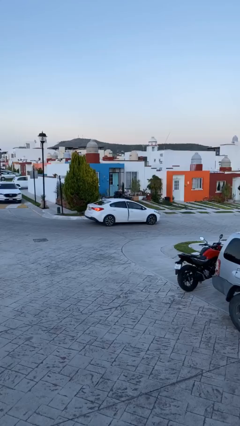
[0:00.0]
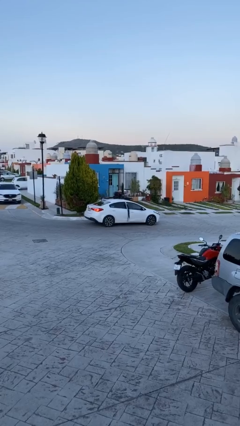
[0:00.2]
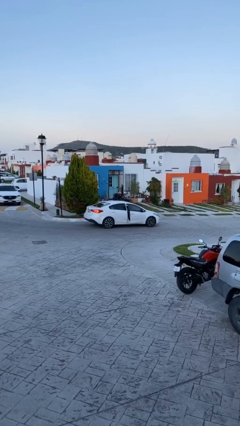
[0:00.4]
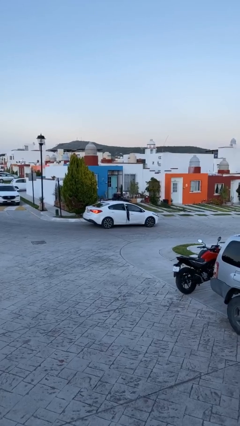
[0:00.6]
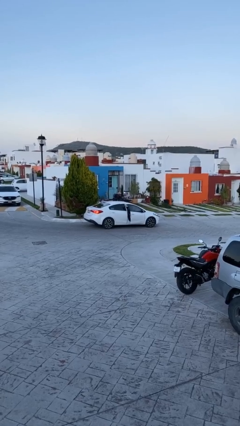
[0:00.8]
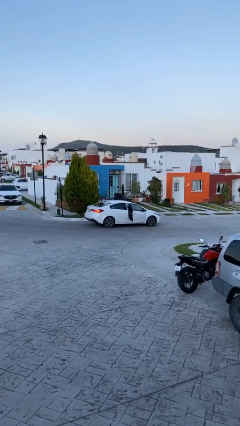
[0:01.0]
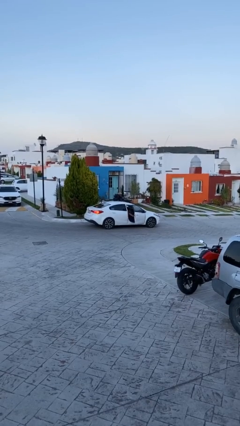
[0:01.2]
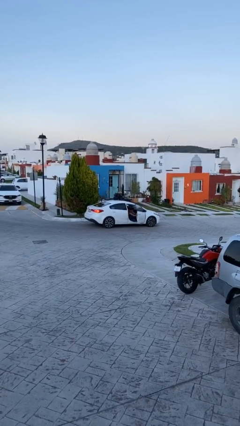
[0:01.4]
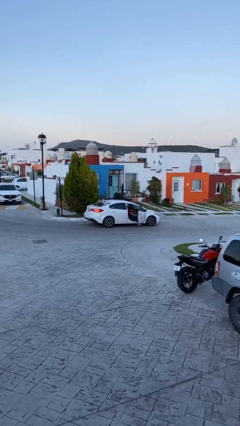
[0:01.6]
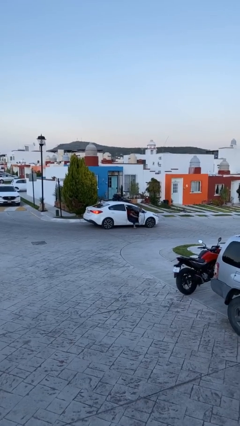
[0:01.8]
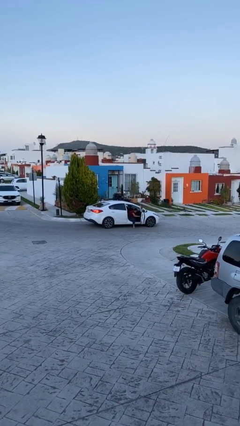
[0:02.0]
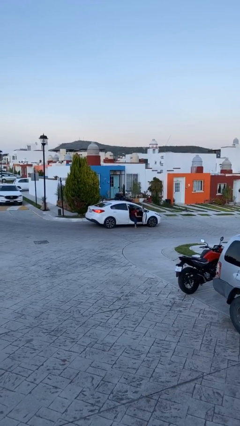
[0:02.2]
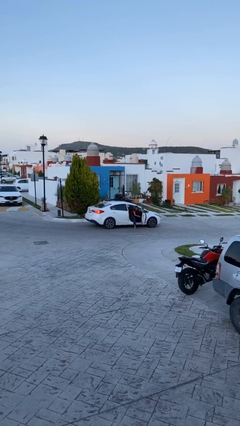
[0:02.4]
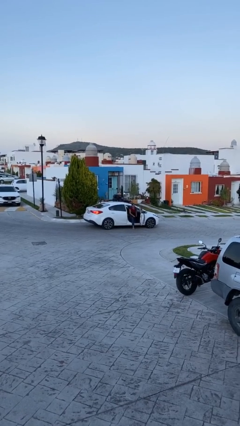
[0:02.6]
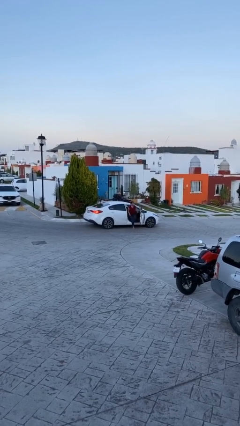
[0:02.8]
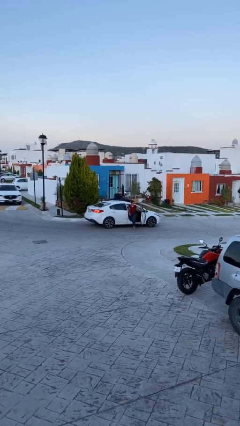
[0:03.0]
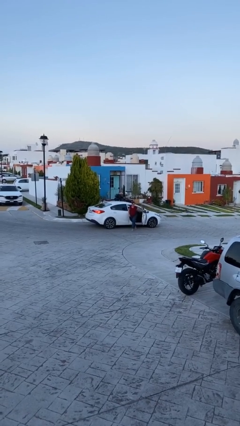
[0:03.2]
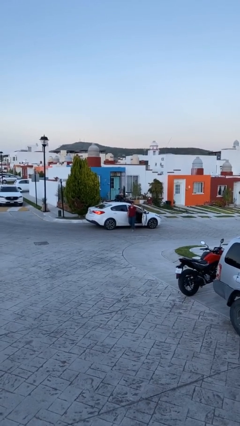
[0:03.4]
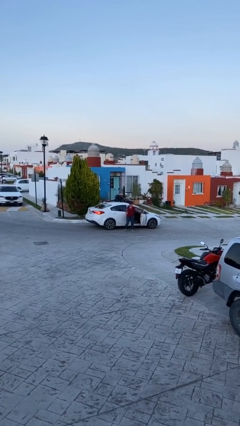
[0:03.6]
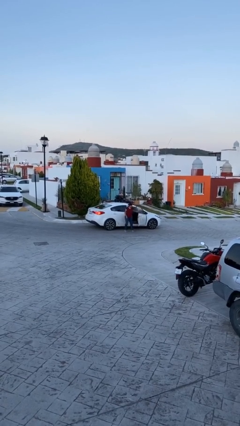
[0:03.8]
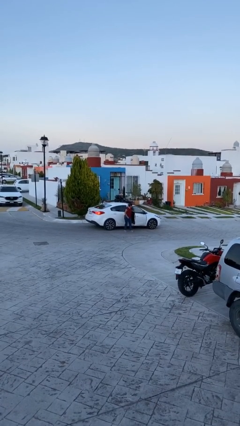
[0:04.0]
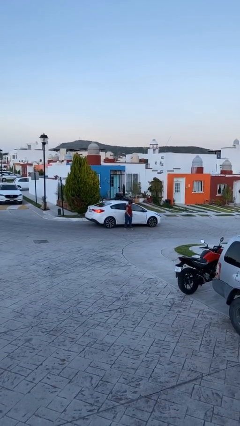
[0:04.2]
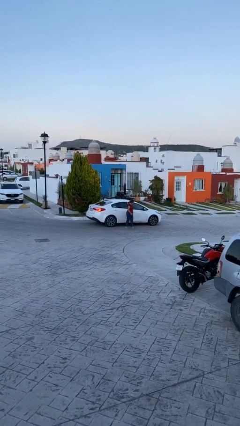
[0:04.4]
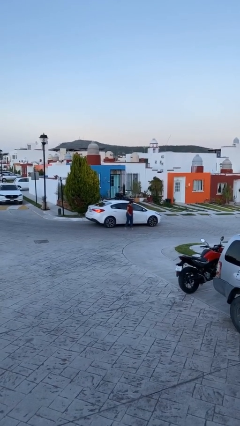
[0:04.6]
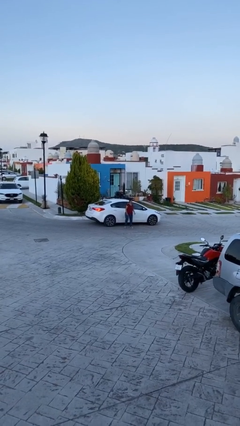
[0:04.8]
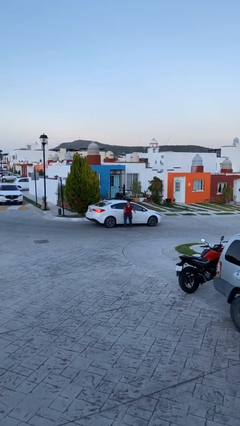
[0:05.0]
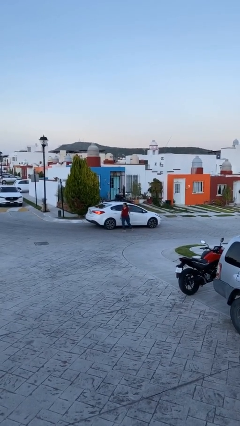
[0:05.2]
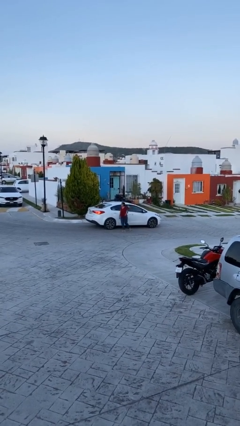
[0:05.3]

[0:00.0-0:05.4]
car drops off person

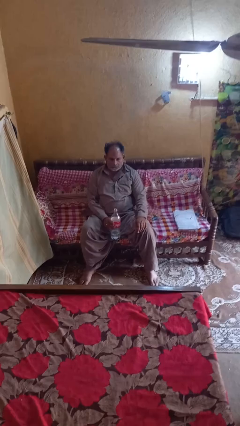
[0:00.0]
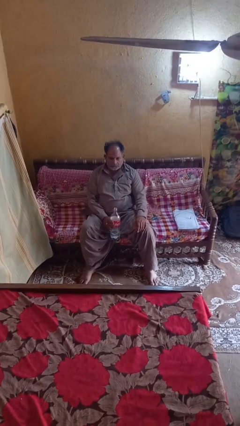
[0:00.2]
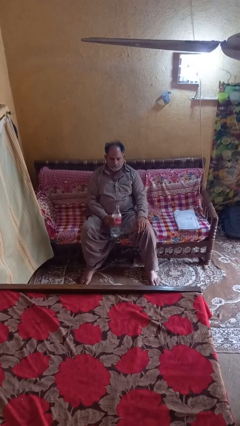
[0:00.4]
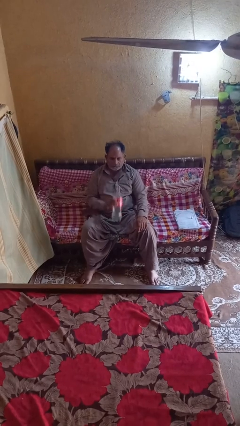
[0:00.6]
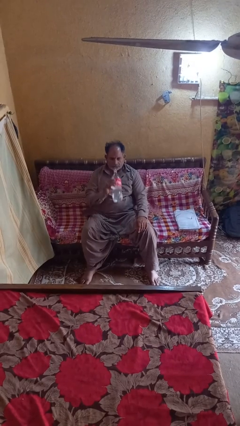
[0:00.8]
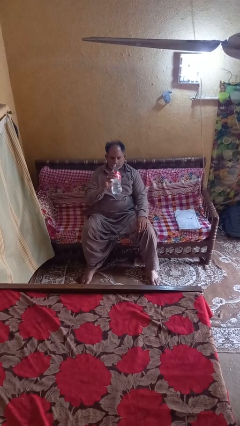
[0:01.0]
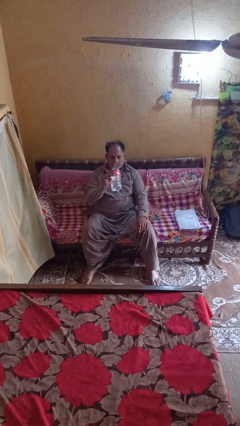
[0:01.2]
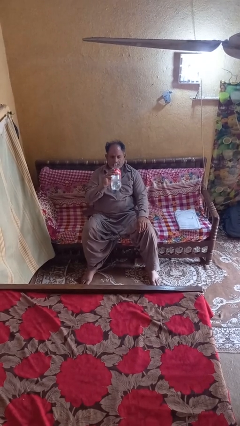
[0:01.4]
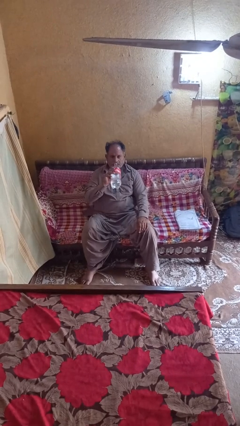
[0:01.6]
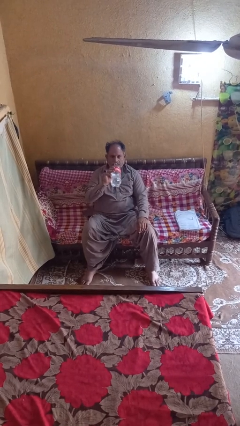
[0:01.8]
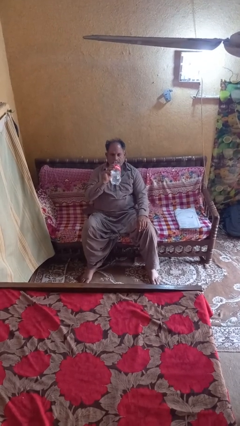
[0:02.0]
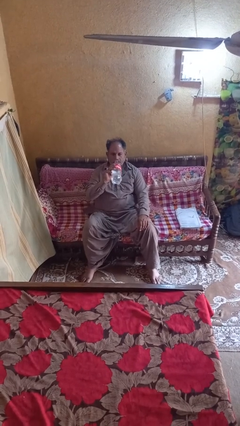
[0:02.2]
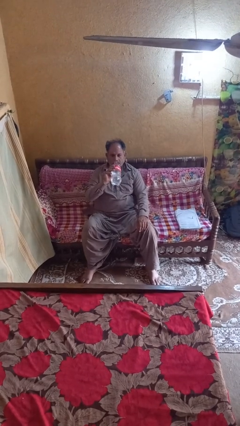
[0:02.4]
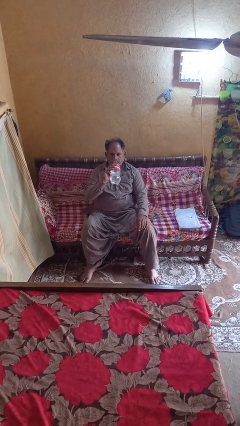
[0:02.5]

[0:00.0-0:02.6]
person drinks from bottle

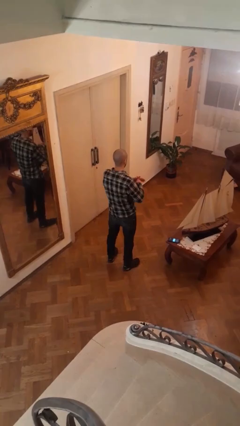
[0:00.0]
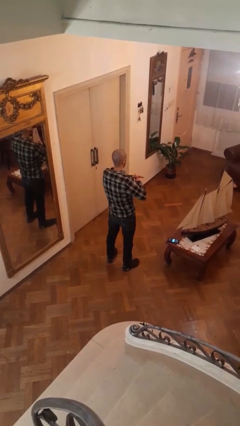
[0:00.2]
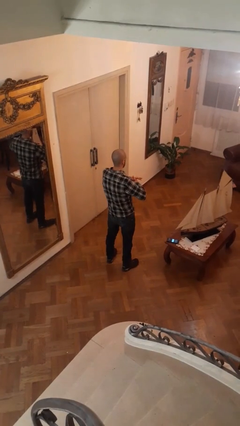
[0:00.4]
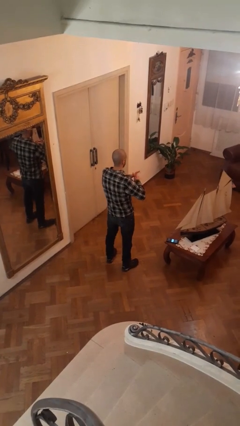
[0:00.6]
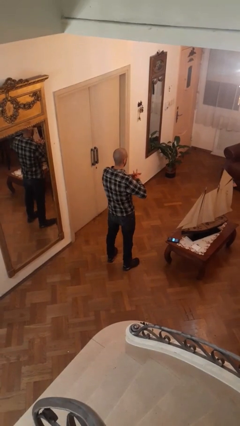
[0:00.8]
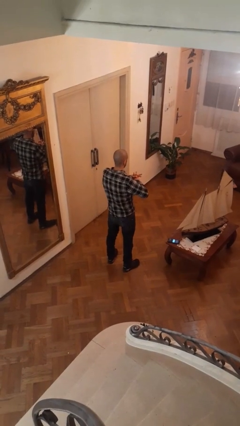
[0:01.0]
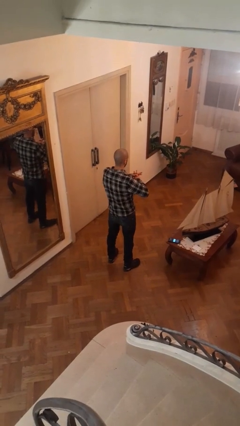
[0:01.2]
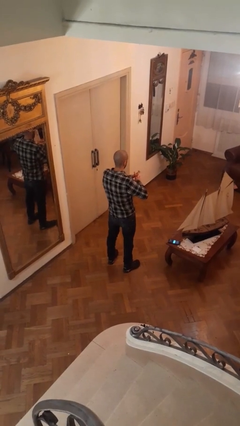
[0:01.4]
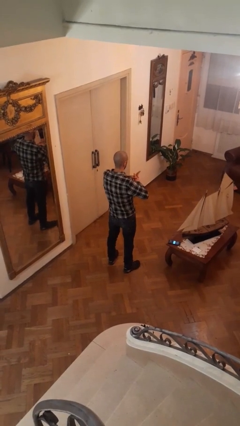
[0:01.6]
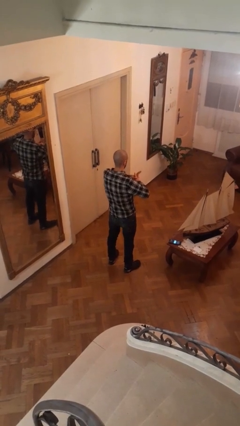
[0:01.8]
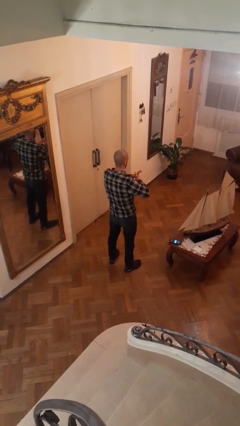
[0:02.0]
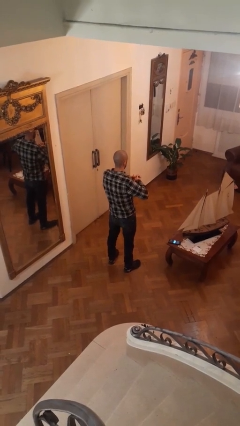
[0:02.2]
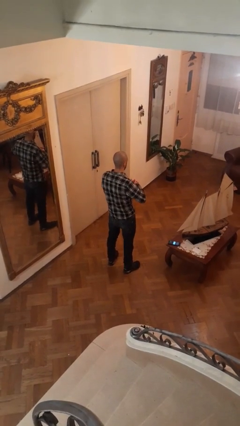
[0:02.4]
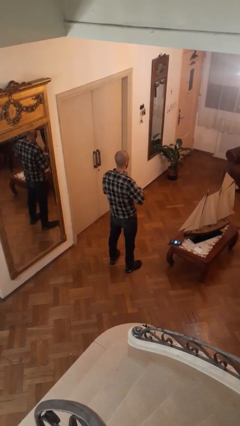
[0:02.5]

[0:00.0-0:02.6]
person cracks knuckles

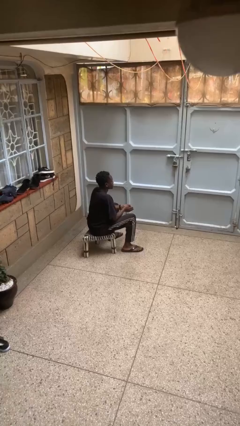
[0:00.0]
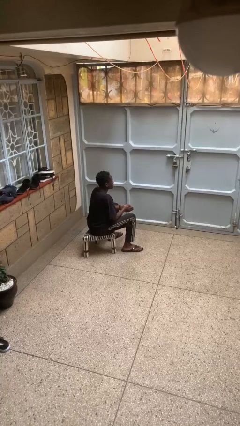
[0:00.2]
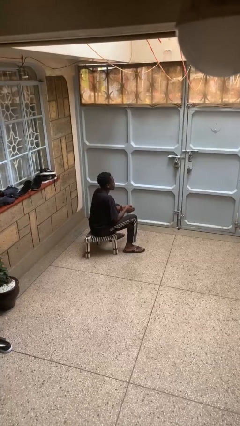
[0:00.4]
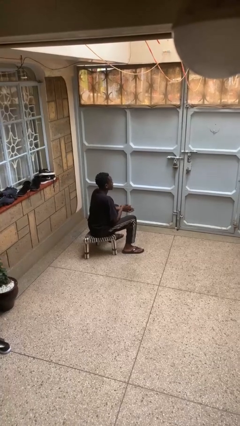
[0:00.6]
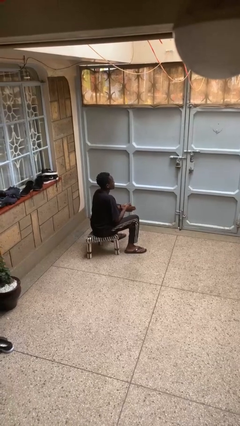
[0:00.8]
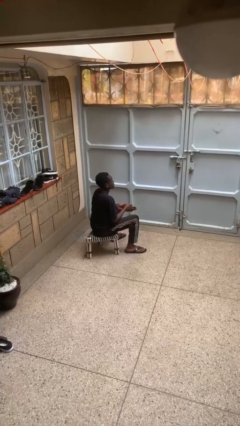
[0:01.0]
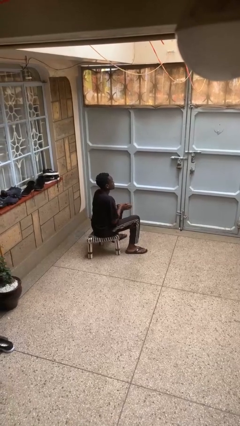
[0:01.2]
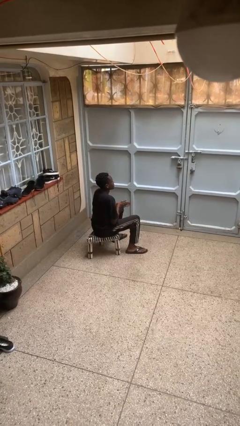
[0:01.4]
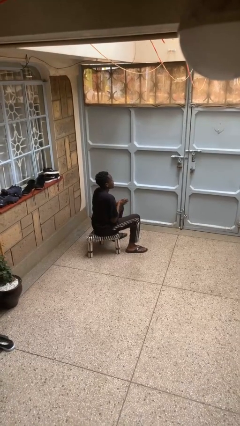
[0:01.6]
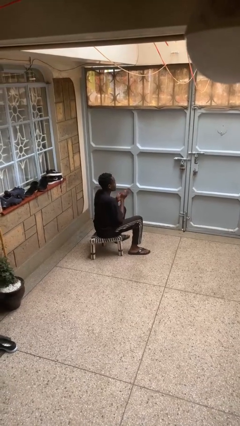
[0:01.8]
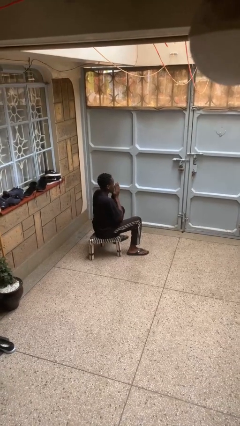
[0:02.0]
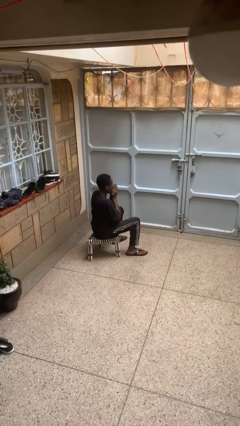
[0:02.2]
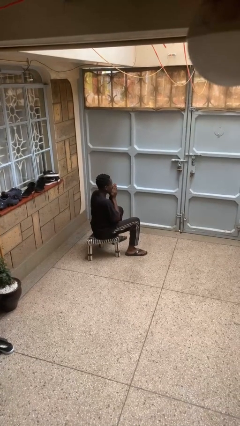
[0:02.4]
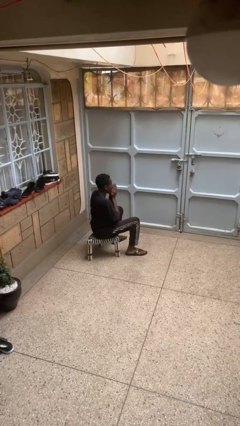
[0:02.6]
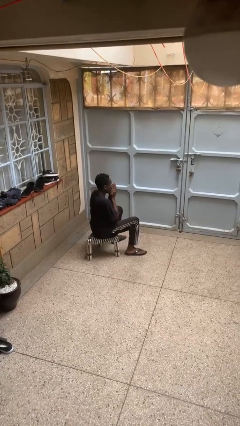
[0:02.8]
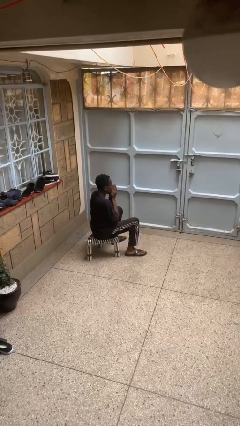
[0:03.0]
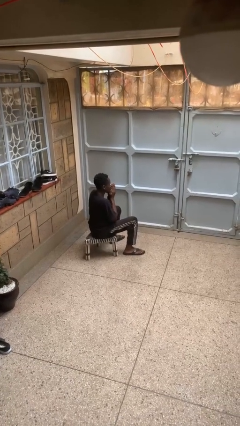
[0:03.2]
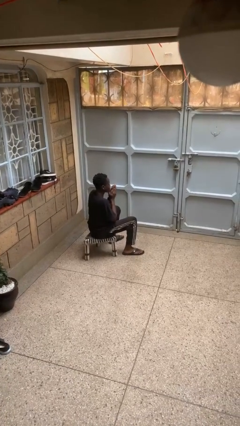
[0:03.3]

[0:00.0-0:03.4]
person blows into hands

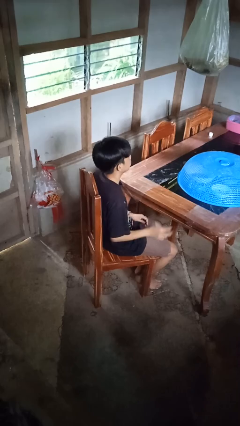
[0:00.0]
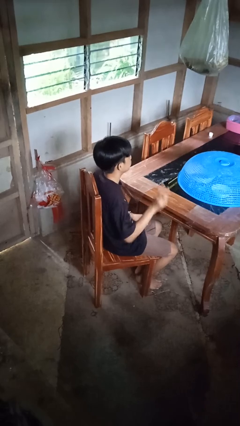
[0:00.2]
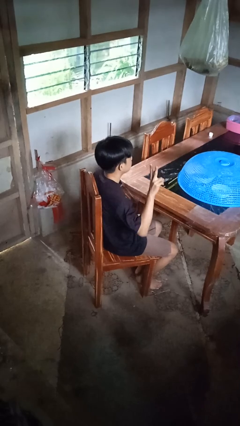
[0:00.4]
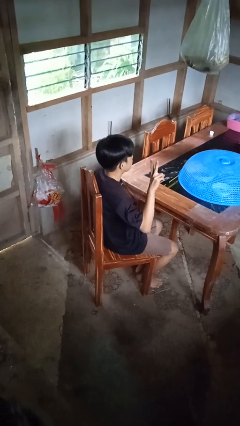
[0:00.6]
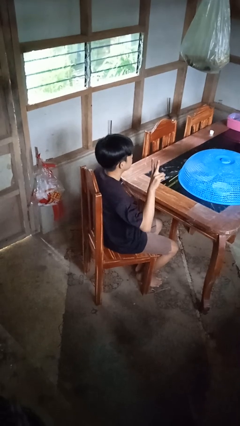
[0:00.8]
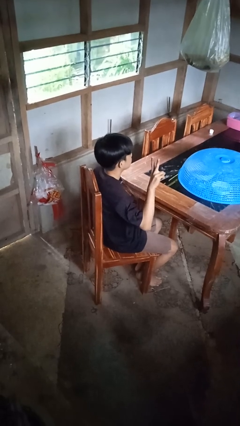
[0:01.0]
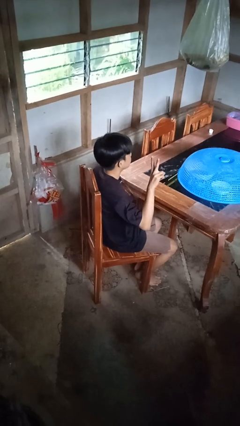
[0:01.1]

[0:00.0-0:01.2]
person gestures peace

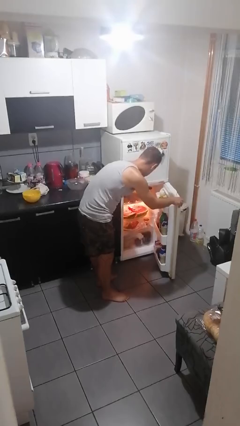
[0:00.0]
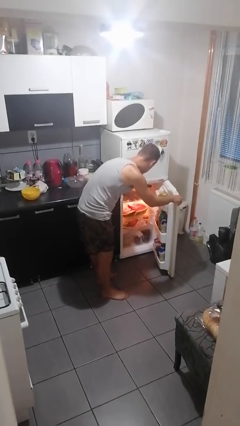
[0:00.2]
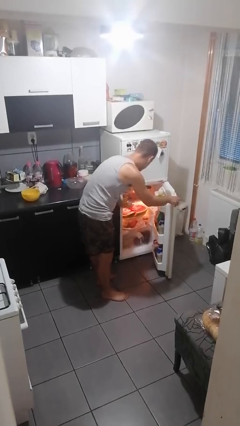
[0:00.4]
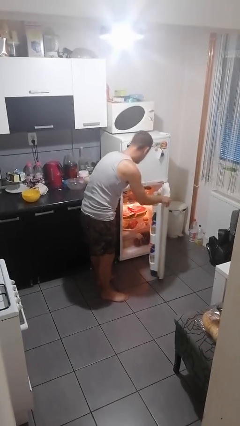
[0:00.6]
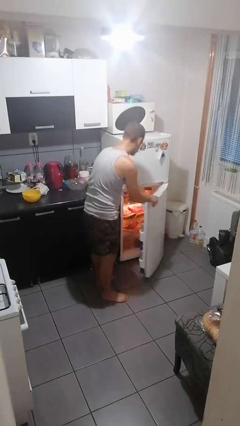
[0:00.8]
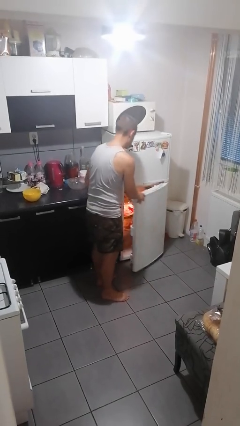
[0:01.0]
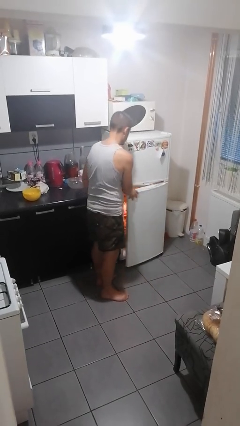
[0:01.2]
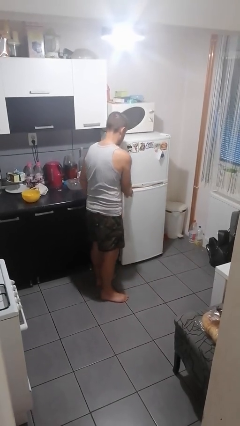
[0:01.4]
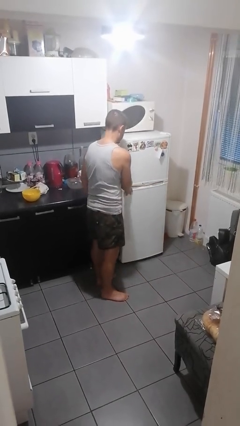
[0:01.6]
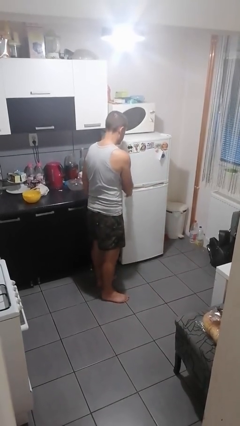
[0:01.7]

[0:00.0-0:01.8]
person closes refrigerator

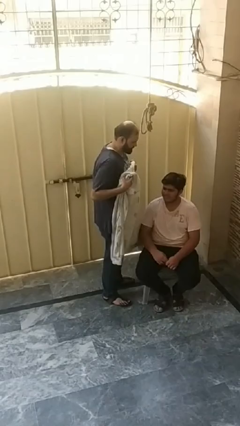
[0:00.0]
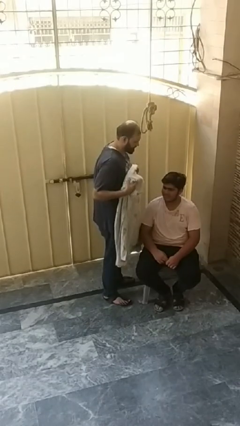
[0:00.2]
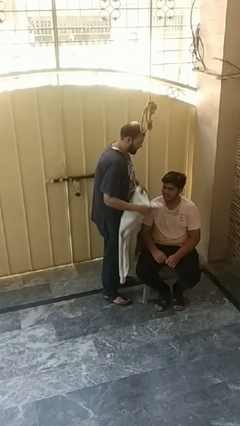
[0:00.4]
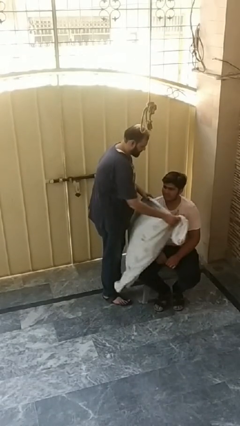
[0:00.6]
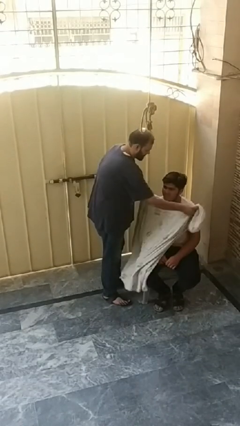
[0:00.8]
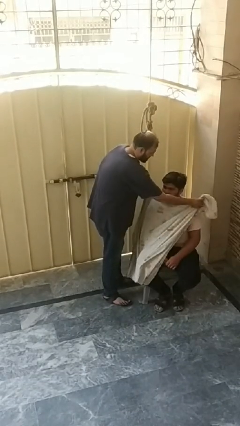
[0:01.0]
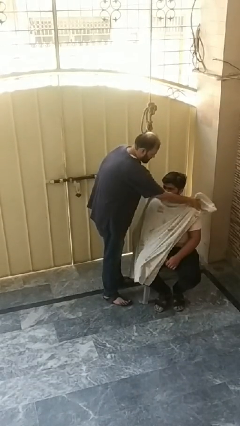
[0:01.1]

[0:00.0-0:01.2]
person covers friend with blanket
